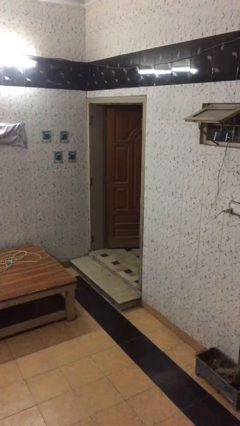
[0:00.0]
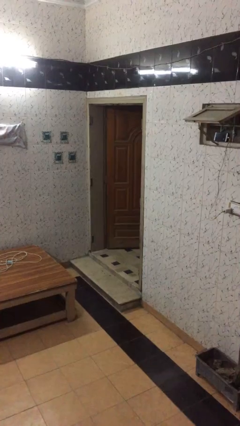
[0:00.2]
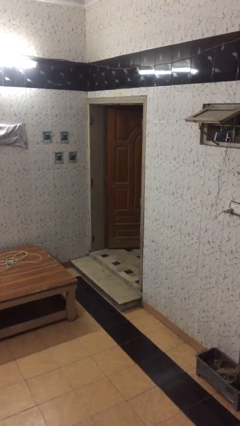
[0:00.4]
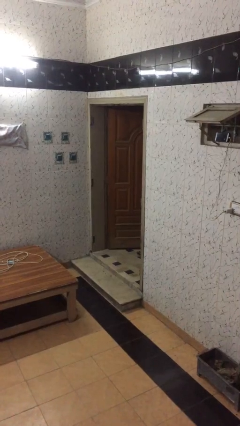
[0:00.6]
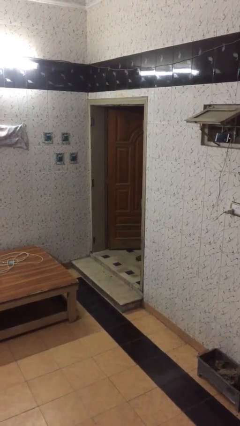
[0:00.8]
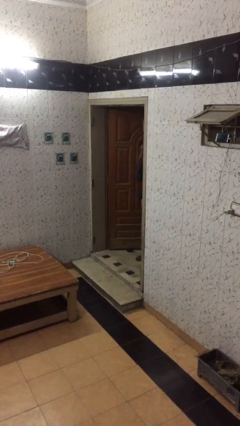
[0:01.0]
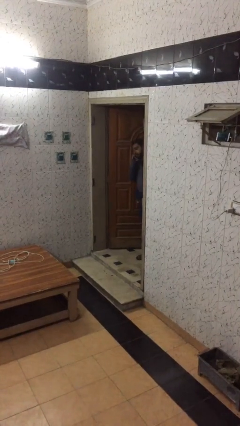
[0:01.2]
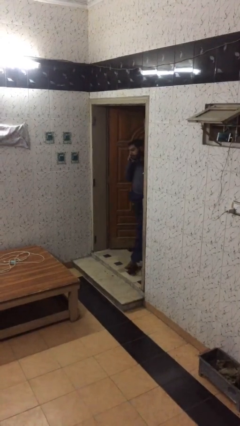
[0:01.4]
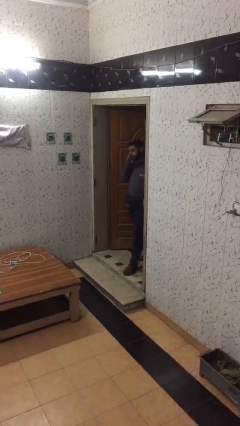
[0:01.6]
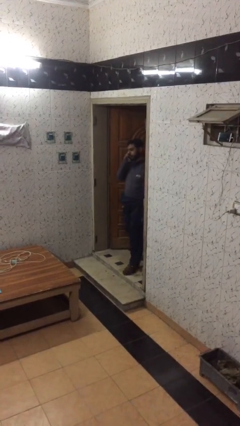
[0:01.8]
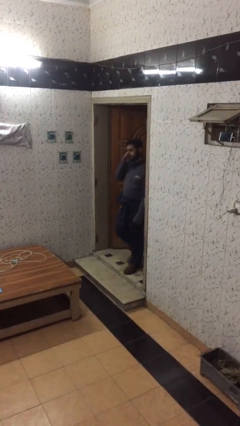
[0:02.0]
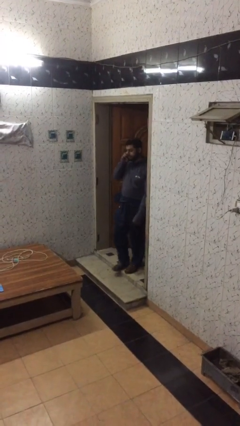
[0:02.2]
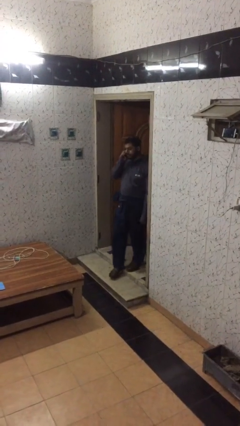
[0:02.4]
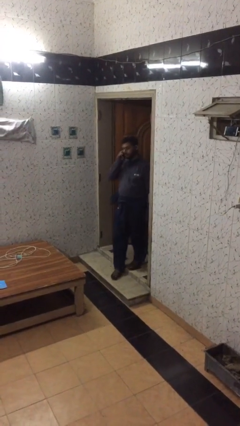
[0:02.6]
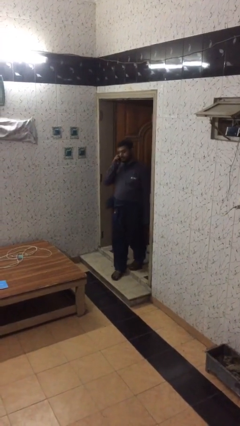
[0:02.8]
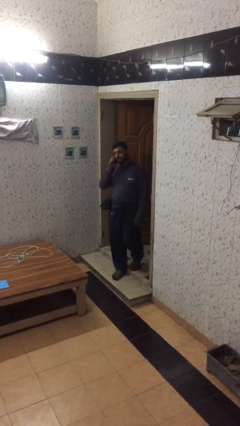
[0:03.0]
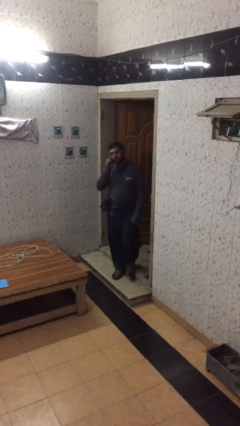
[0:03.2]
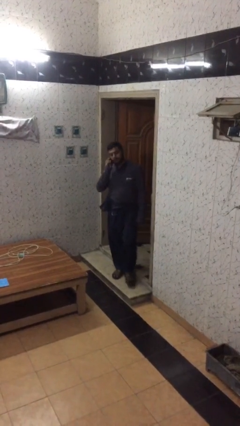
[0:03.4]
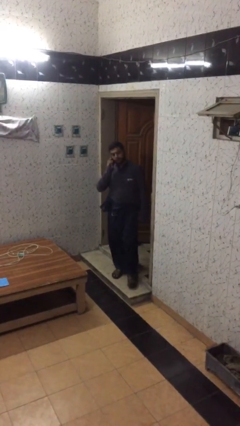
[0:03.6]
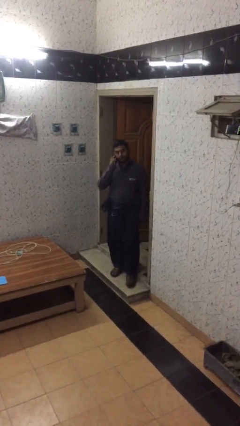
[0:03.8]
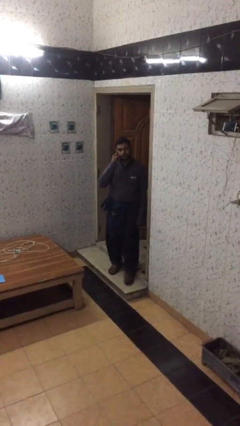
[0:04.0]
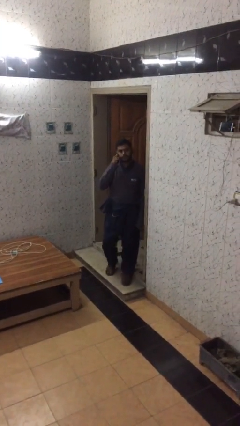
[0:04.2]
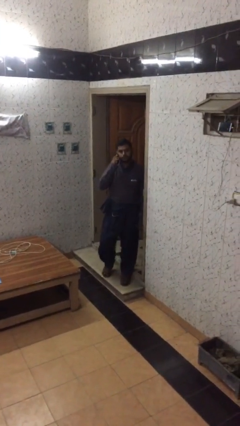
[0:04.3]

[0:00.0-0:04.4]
person enters scene through structure

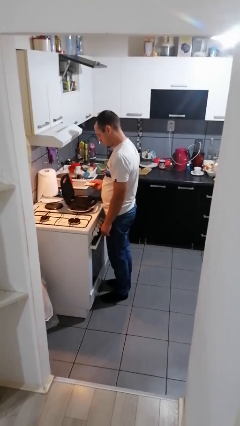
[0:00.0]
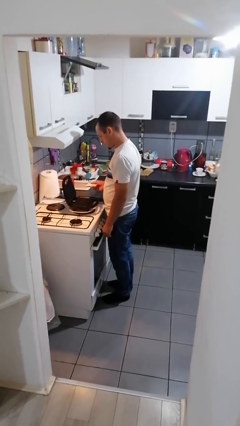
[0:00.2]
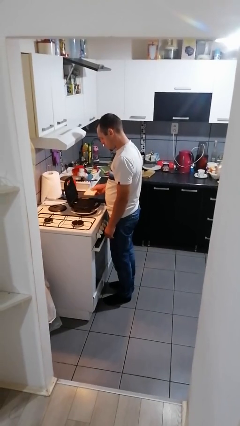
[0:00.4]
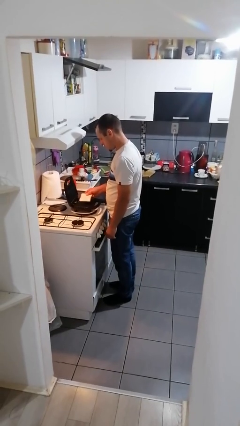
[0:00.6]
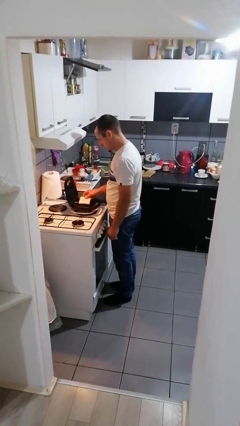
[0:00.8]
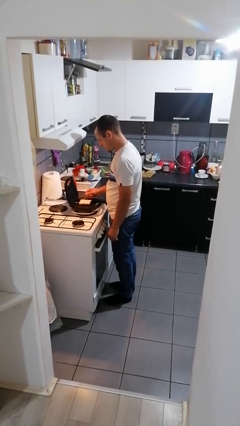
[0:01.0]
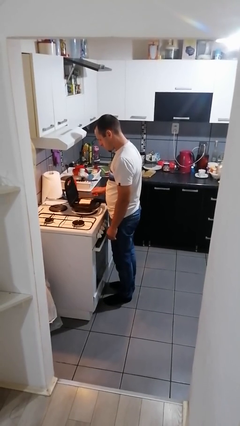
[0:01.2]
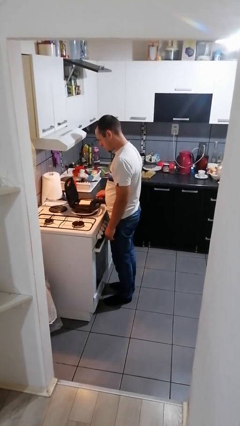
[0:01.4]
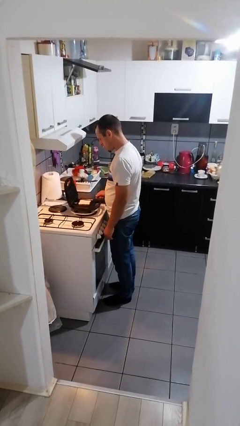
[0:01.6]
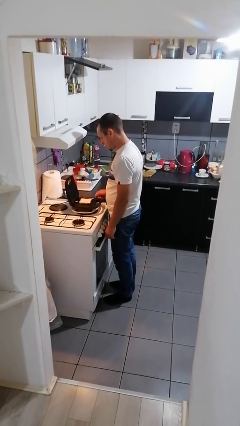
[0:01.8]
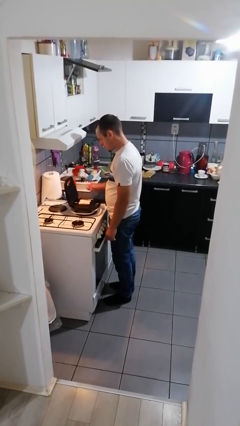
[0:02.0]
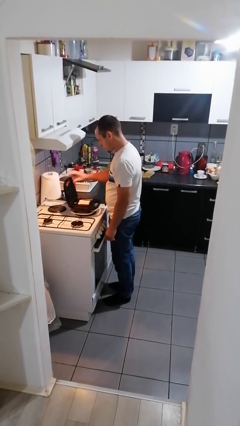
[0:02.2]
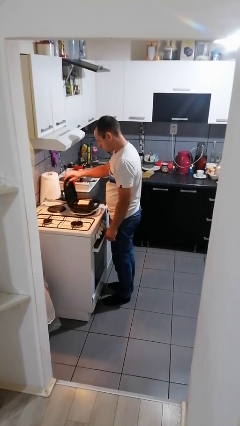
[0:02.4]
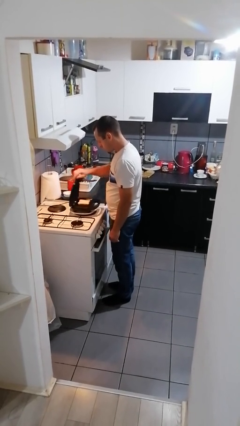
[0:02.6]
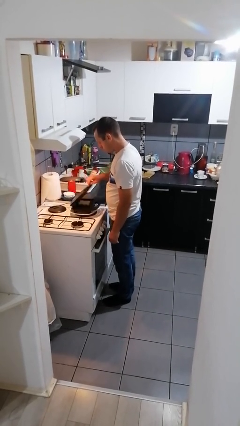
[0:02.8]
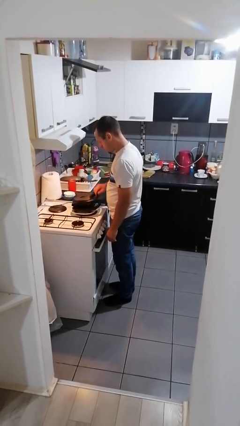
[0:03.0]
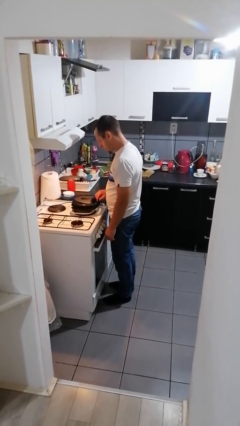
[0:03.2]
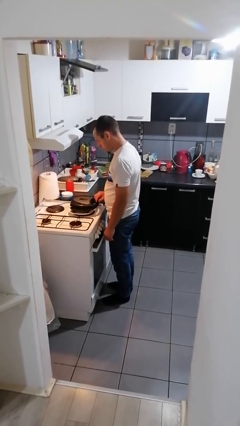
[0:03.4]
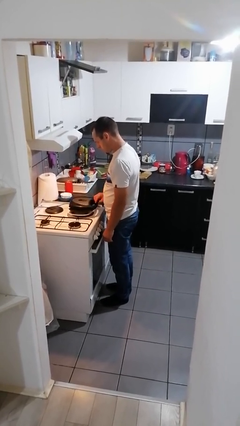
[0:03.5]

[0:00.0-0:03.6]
person puts object into toaster

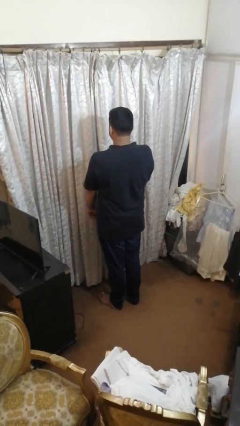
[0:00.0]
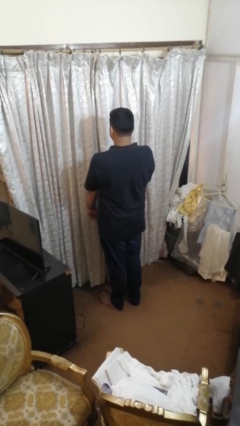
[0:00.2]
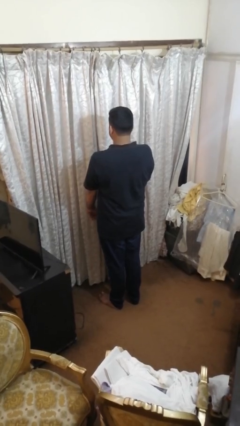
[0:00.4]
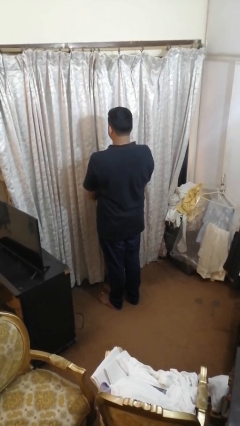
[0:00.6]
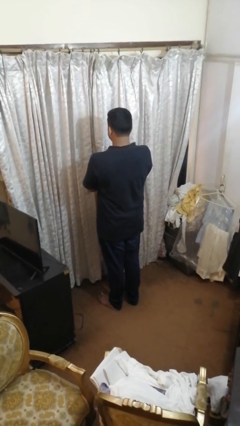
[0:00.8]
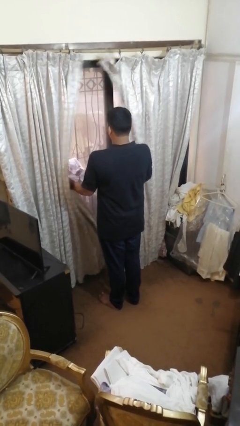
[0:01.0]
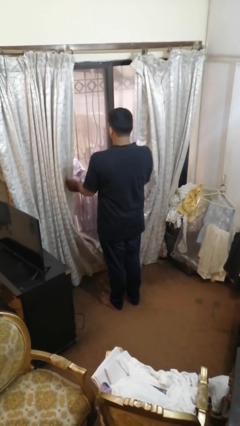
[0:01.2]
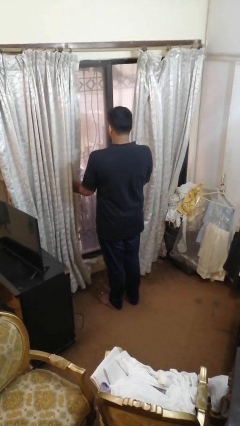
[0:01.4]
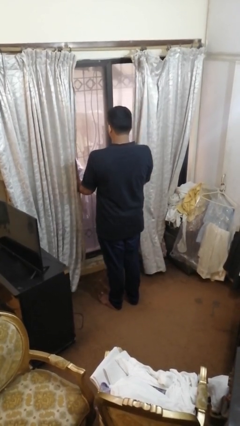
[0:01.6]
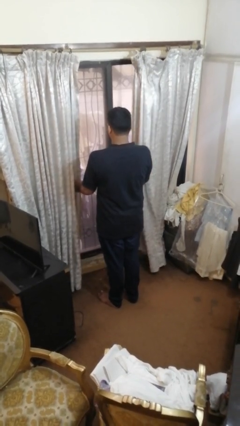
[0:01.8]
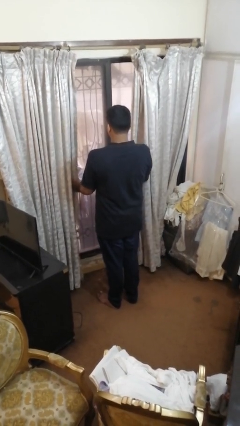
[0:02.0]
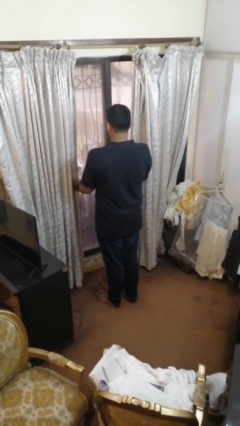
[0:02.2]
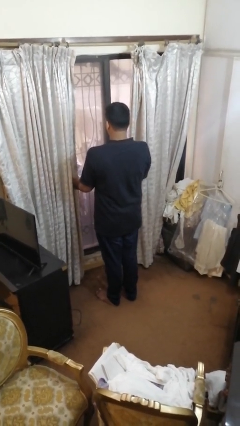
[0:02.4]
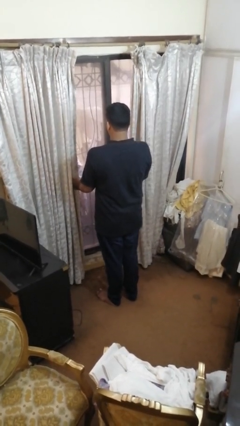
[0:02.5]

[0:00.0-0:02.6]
person opens curtains

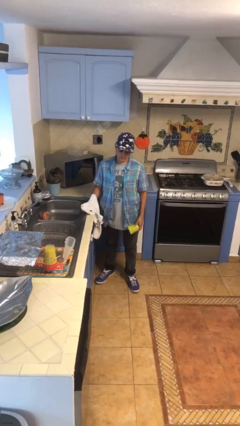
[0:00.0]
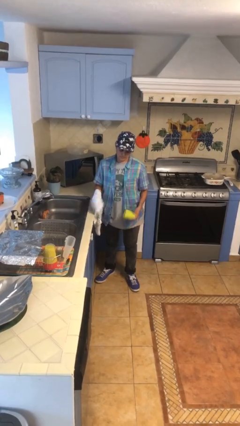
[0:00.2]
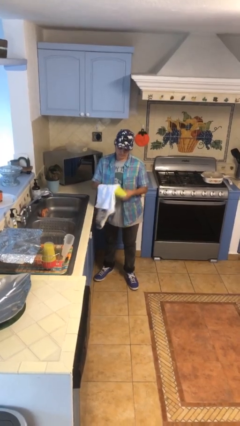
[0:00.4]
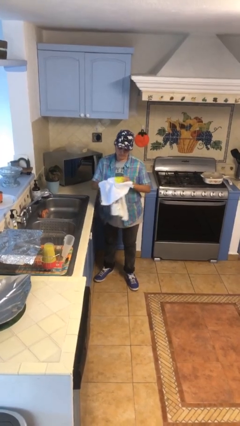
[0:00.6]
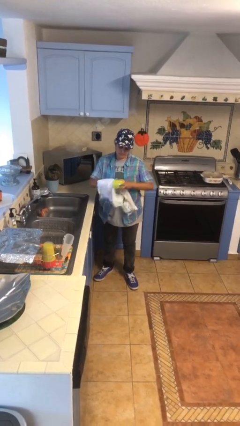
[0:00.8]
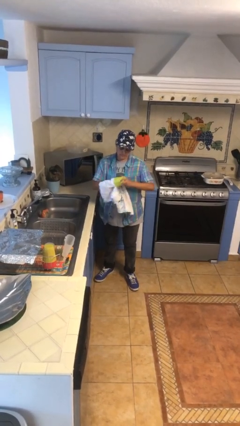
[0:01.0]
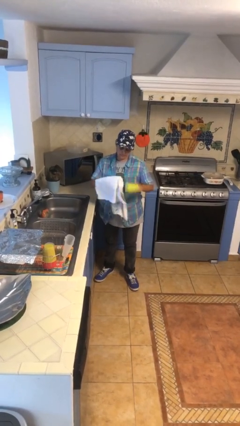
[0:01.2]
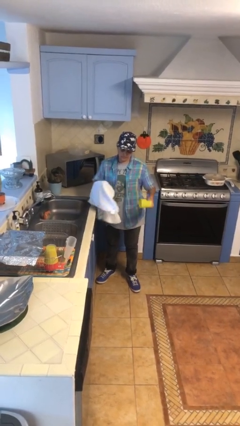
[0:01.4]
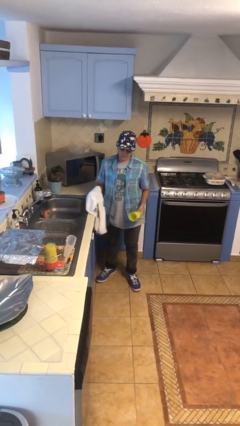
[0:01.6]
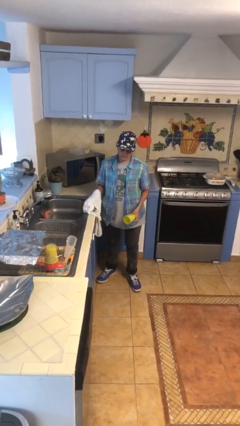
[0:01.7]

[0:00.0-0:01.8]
person dries dish

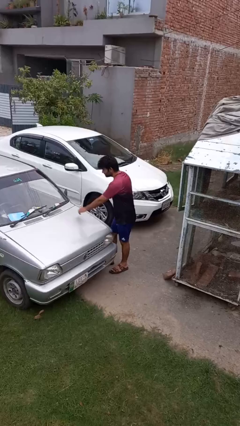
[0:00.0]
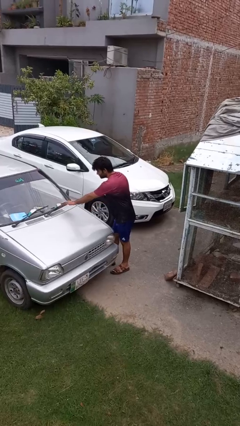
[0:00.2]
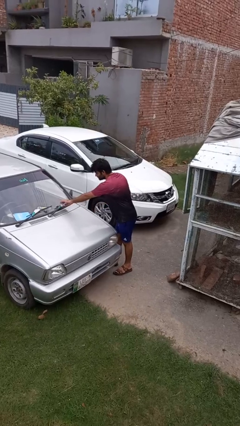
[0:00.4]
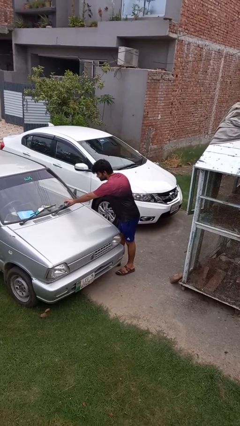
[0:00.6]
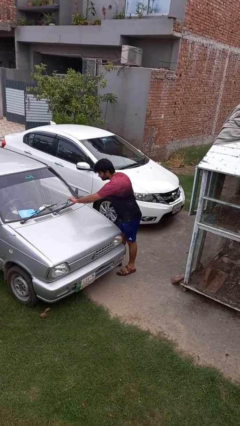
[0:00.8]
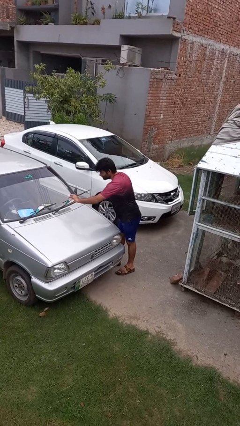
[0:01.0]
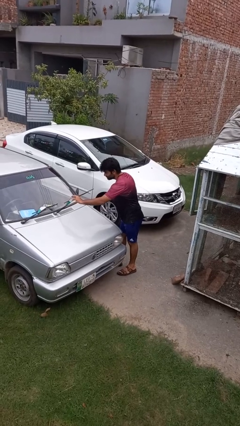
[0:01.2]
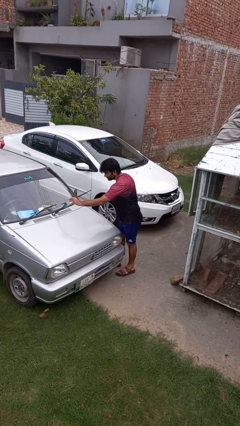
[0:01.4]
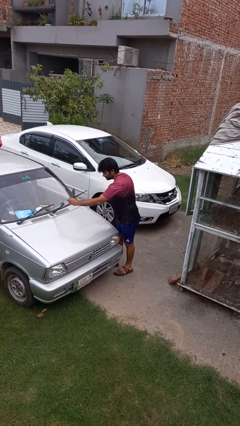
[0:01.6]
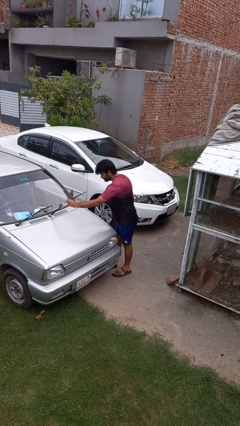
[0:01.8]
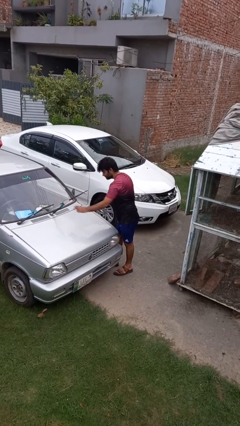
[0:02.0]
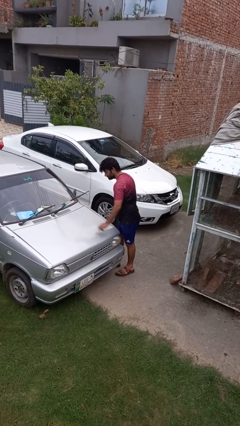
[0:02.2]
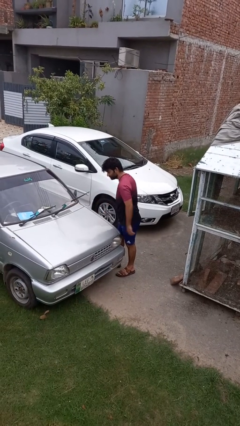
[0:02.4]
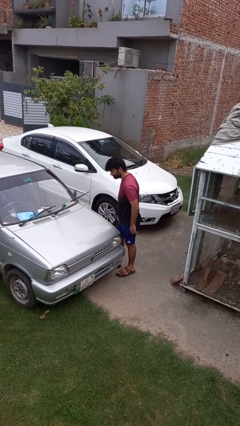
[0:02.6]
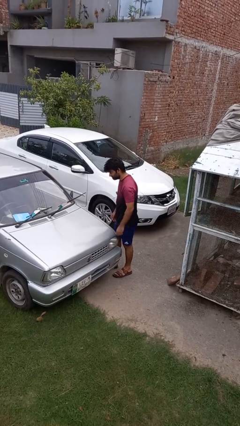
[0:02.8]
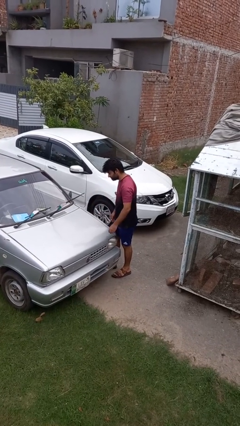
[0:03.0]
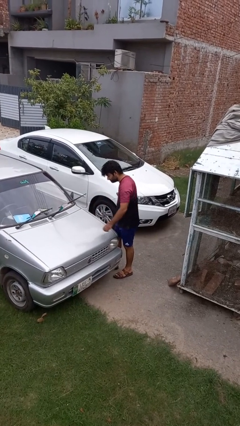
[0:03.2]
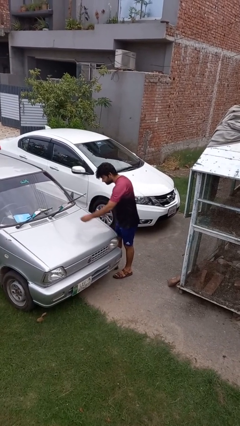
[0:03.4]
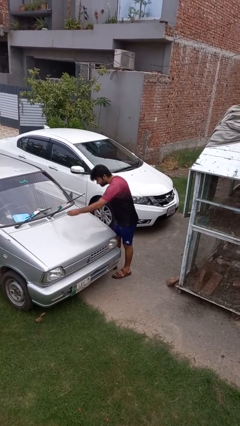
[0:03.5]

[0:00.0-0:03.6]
person flips up car wipers

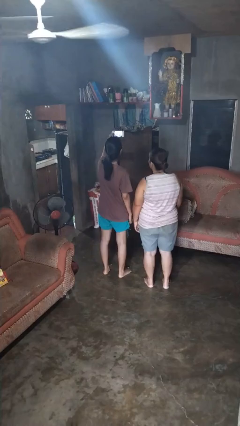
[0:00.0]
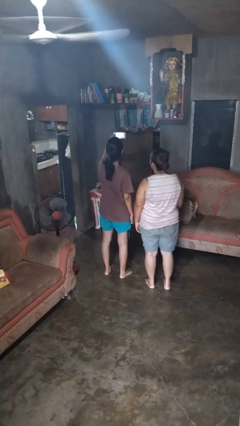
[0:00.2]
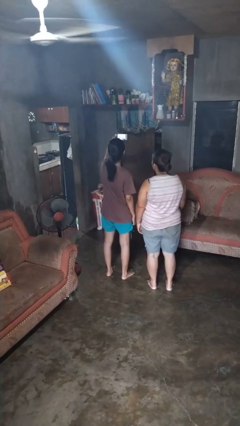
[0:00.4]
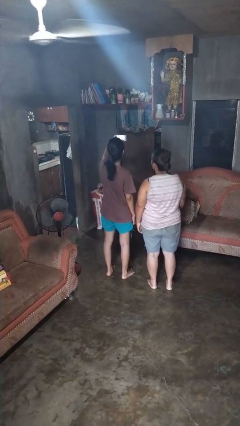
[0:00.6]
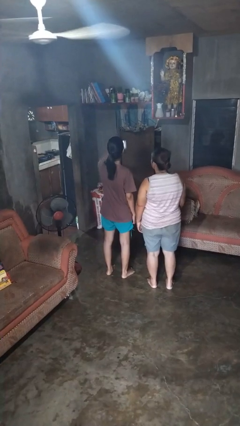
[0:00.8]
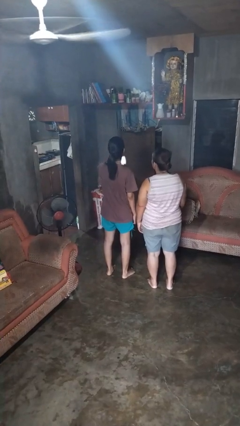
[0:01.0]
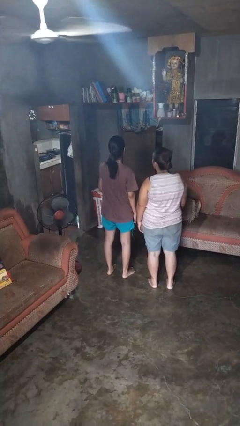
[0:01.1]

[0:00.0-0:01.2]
person takes selfie with person

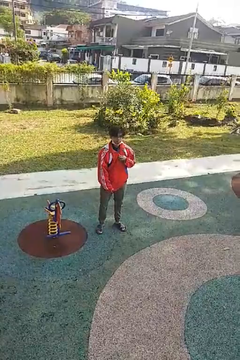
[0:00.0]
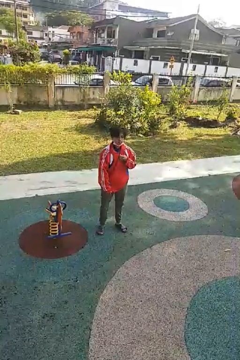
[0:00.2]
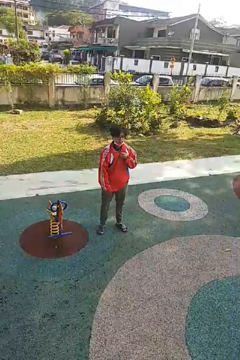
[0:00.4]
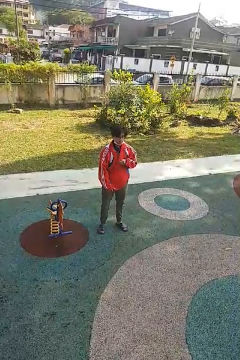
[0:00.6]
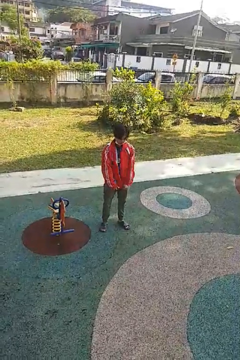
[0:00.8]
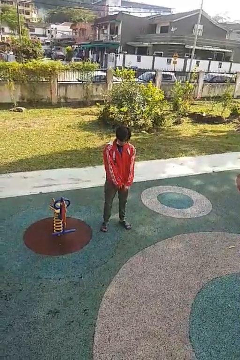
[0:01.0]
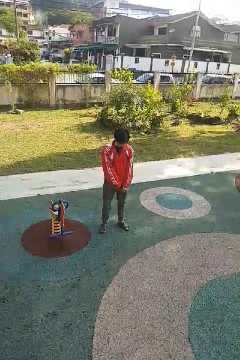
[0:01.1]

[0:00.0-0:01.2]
person unzips jacket
